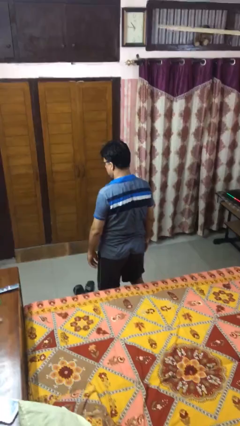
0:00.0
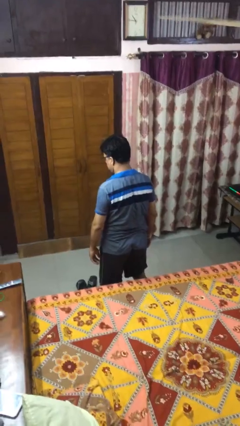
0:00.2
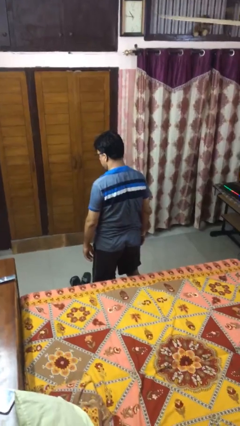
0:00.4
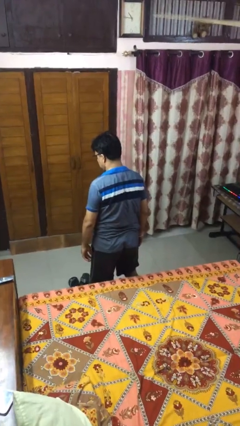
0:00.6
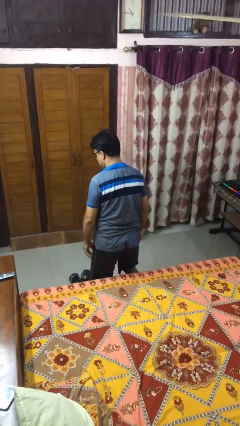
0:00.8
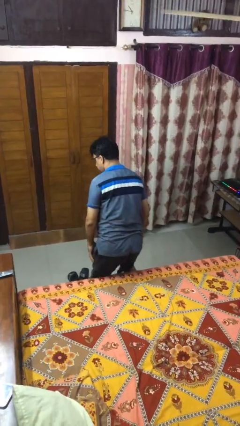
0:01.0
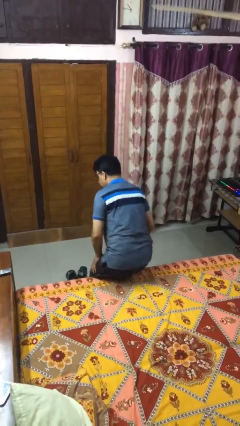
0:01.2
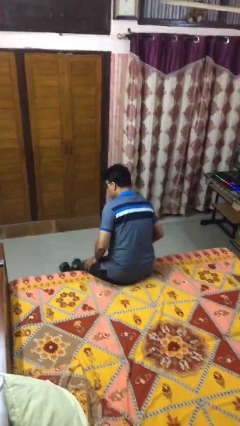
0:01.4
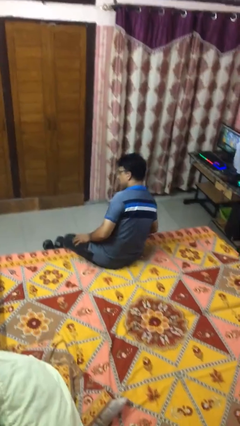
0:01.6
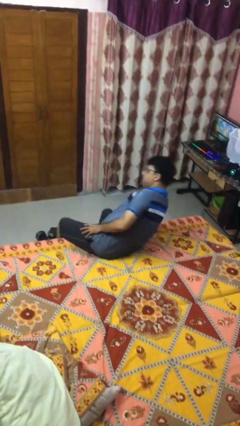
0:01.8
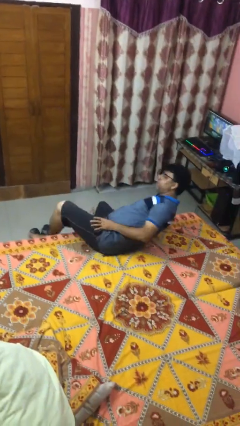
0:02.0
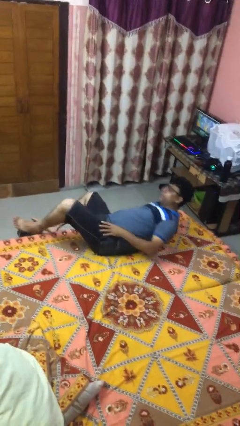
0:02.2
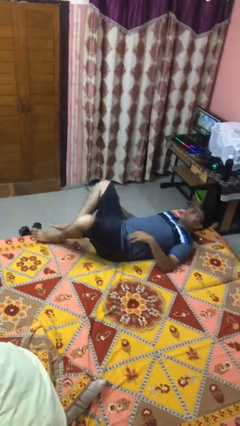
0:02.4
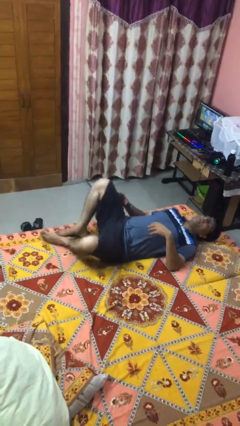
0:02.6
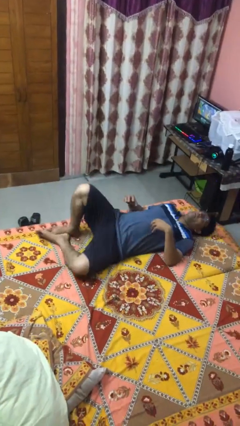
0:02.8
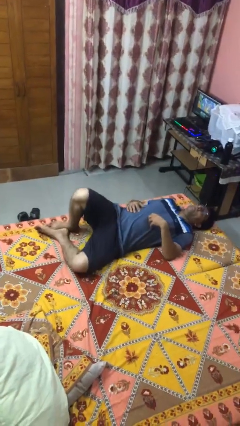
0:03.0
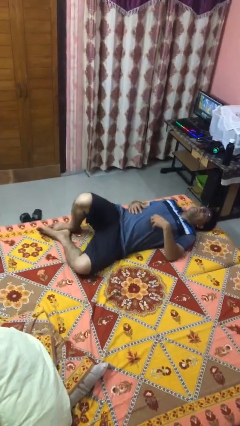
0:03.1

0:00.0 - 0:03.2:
person lies down on bed

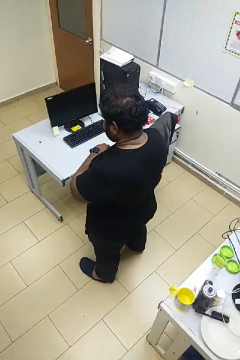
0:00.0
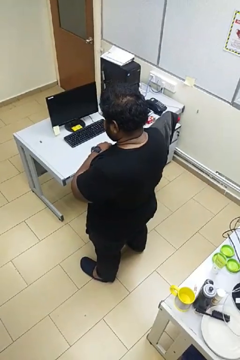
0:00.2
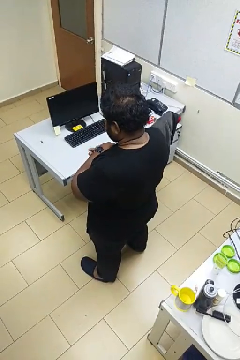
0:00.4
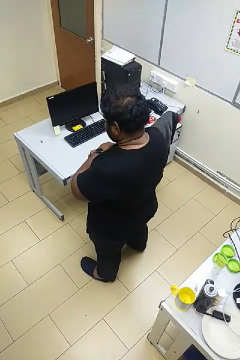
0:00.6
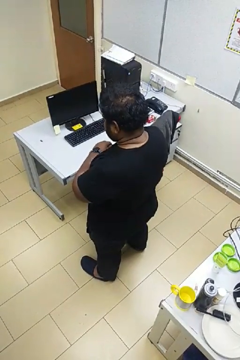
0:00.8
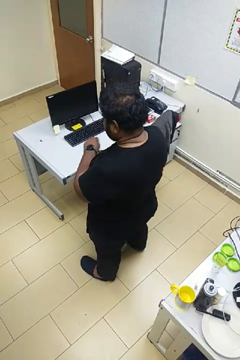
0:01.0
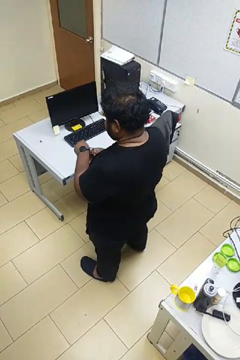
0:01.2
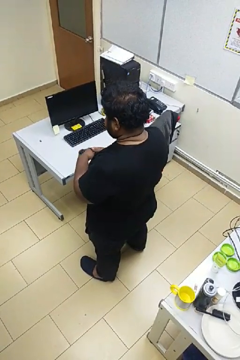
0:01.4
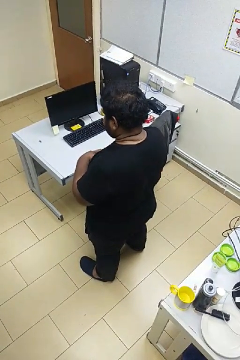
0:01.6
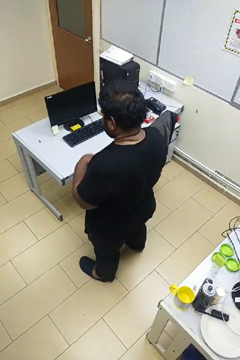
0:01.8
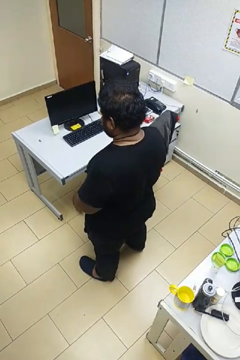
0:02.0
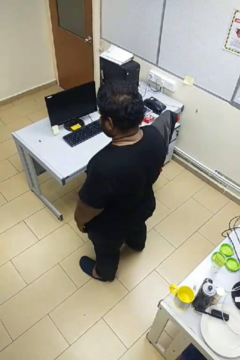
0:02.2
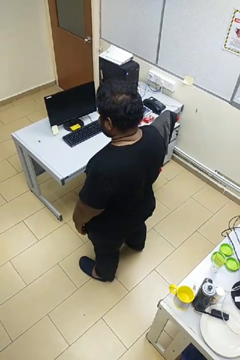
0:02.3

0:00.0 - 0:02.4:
person takes off wristwatch

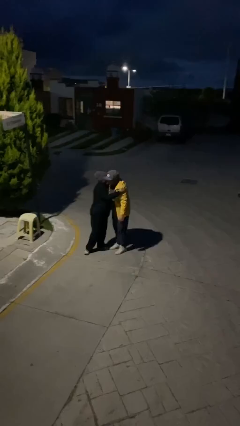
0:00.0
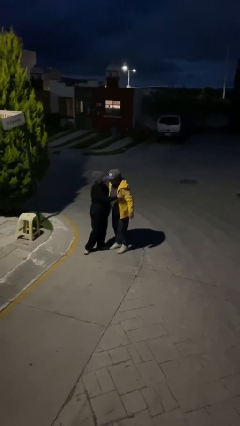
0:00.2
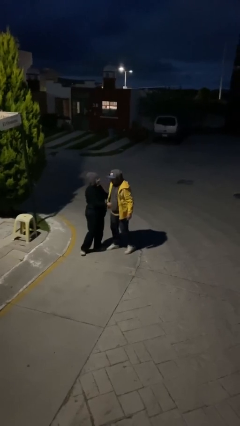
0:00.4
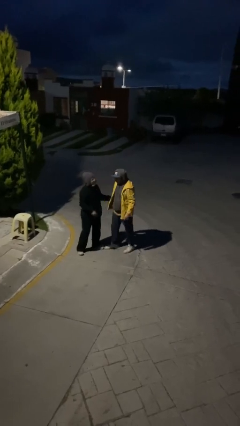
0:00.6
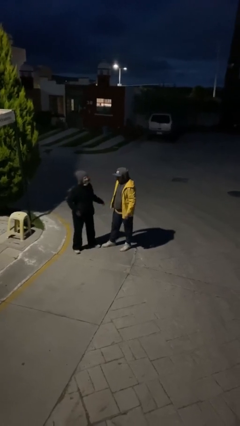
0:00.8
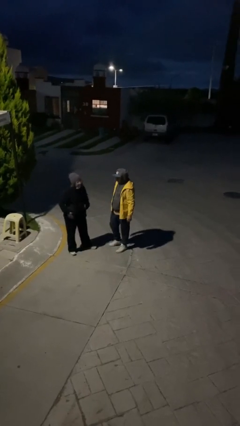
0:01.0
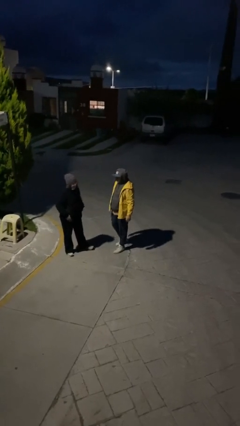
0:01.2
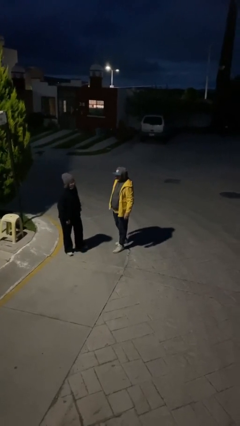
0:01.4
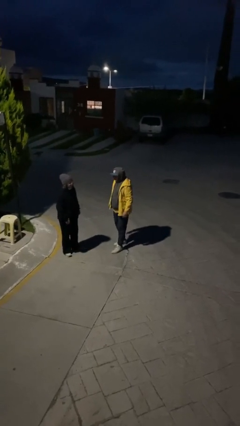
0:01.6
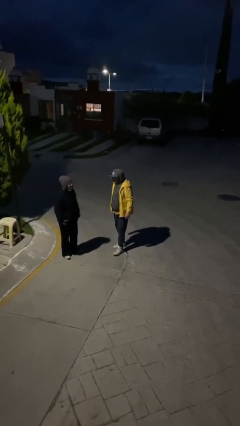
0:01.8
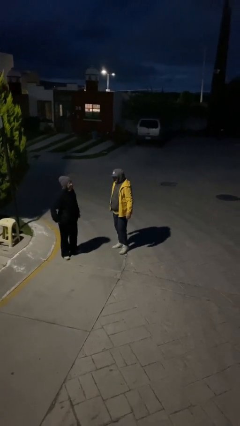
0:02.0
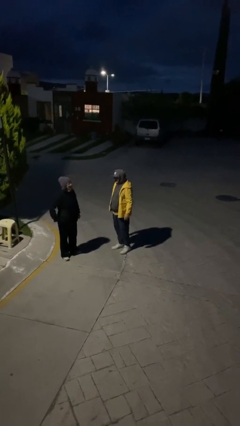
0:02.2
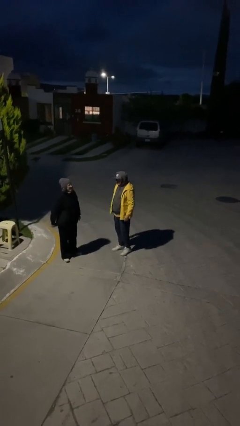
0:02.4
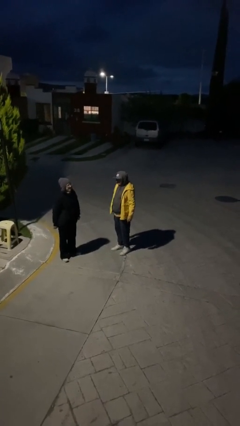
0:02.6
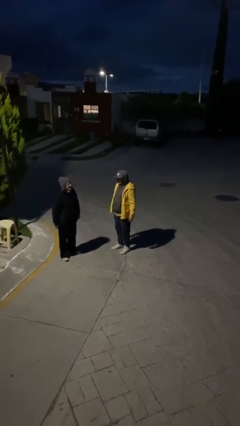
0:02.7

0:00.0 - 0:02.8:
person talks to person

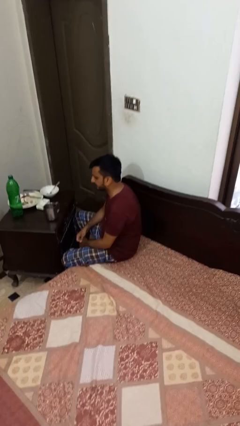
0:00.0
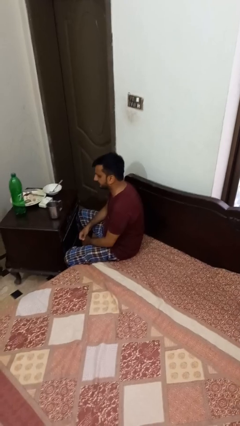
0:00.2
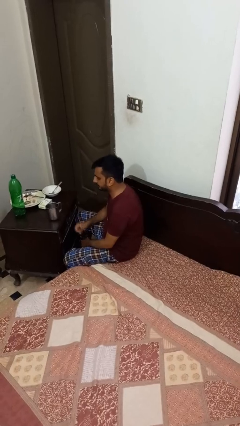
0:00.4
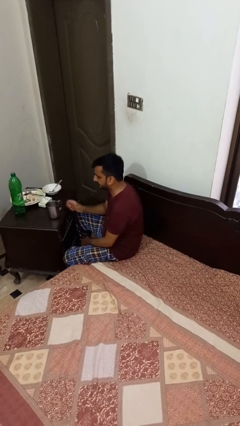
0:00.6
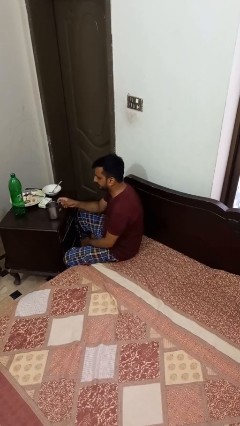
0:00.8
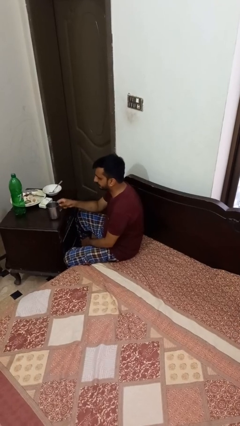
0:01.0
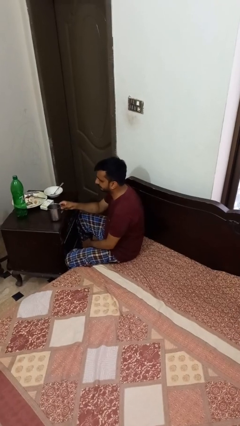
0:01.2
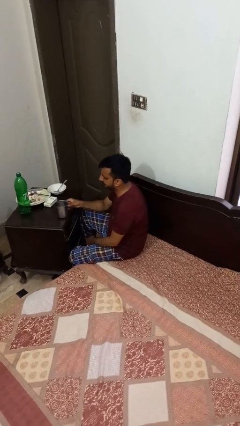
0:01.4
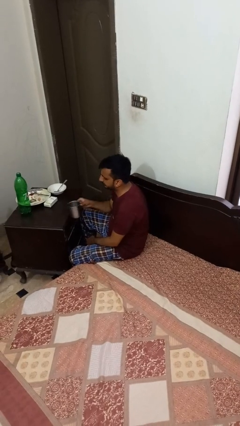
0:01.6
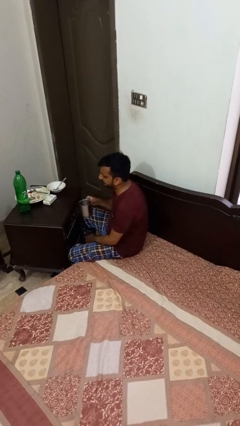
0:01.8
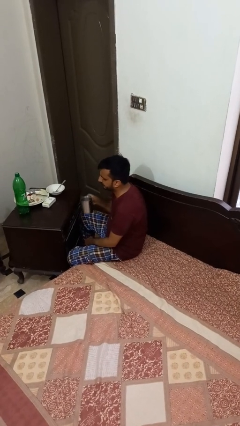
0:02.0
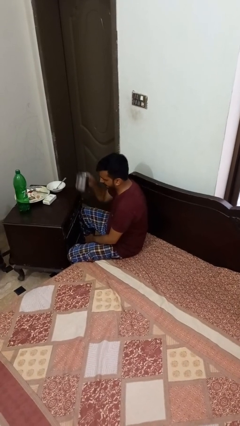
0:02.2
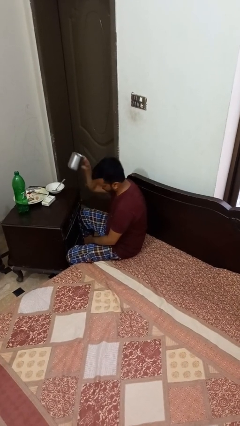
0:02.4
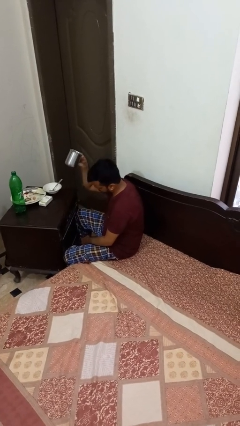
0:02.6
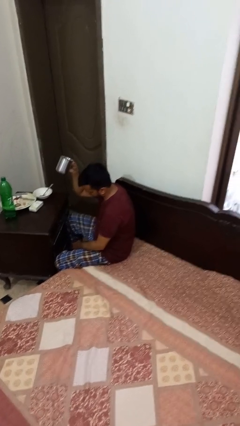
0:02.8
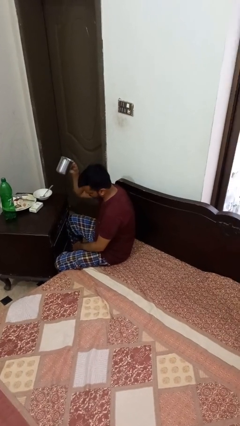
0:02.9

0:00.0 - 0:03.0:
person picks up object from table

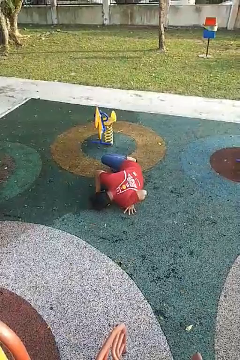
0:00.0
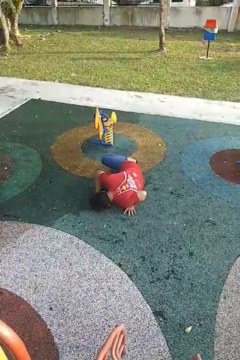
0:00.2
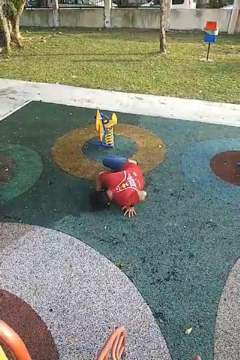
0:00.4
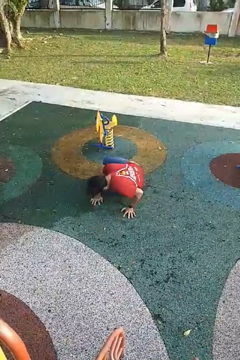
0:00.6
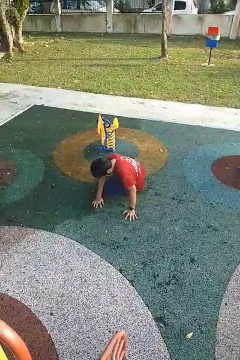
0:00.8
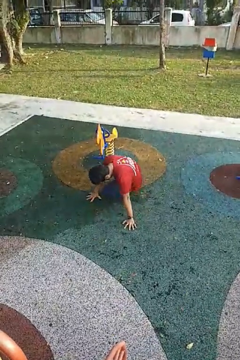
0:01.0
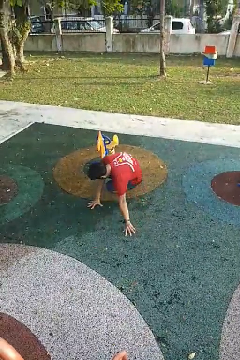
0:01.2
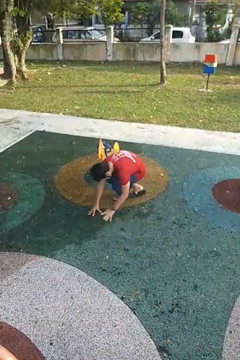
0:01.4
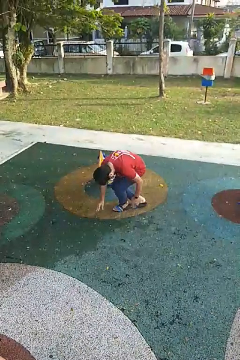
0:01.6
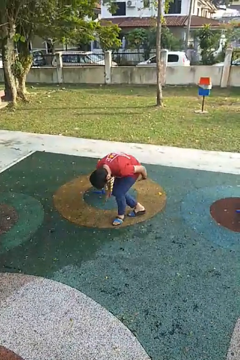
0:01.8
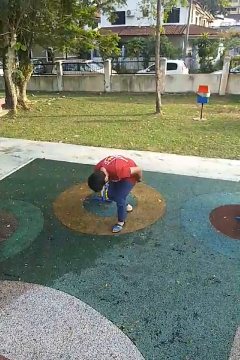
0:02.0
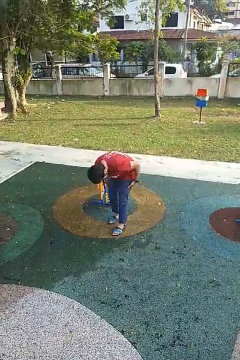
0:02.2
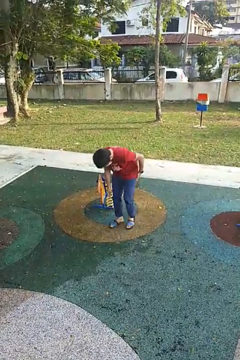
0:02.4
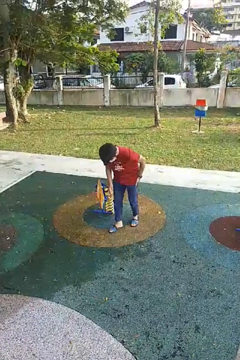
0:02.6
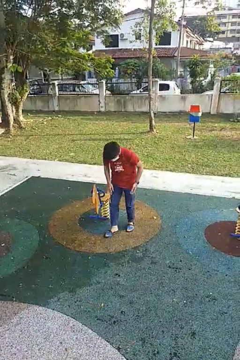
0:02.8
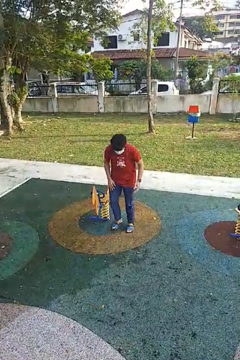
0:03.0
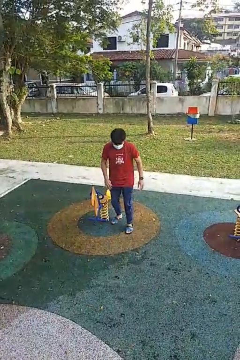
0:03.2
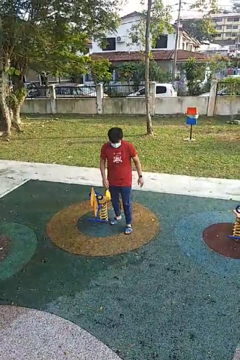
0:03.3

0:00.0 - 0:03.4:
person stands up from floor

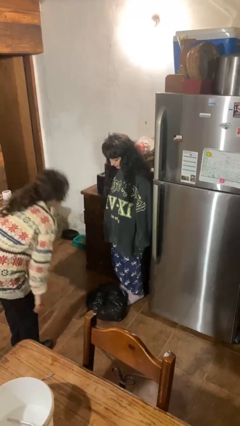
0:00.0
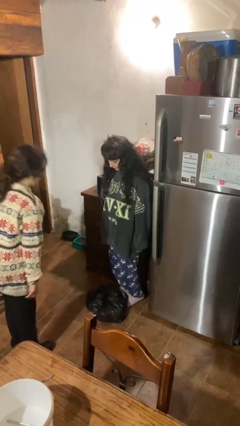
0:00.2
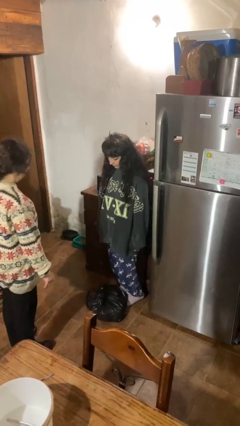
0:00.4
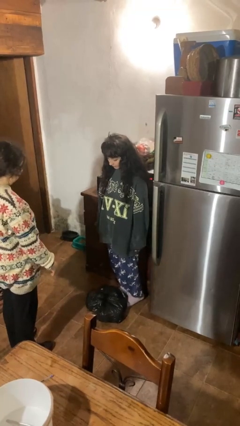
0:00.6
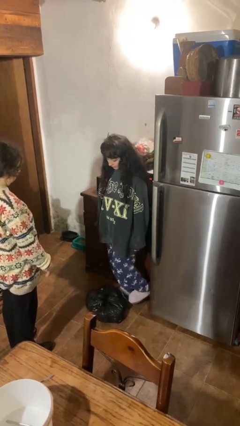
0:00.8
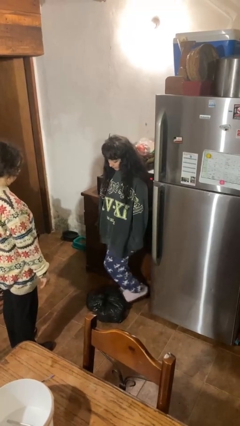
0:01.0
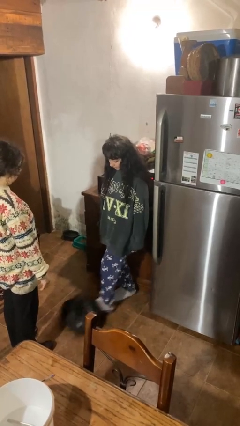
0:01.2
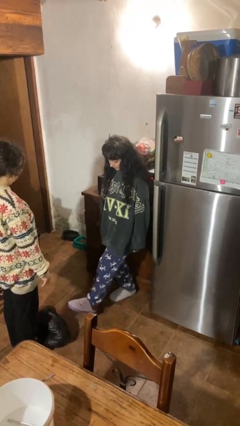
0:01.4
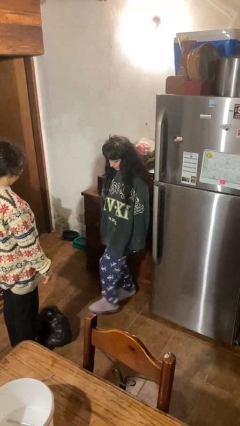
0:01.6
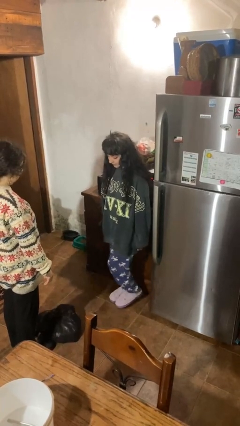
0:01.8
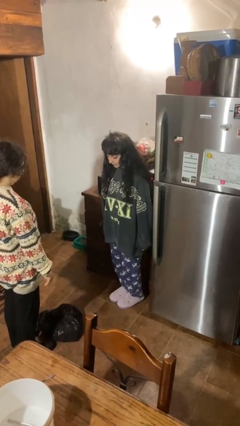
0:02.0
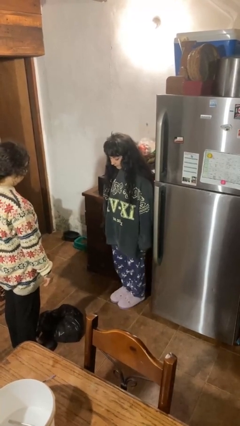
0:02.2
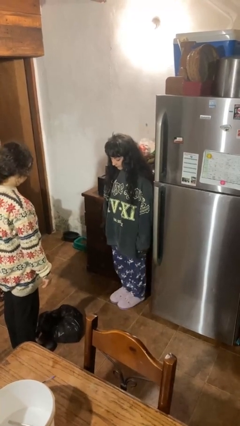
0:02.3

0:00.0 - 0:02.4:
person kicks object to person

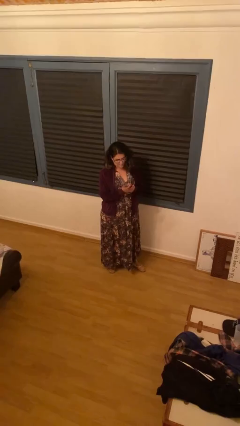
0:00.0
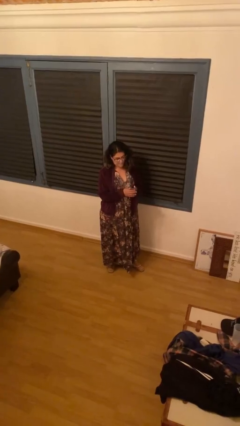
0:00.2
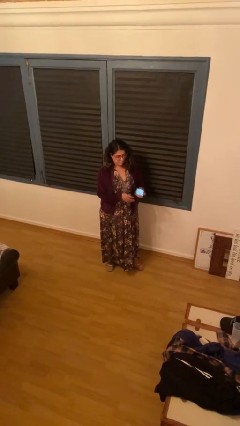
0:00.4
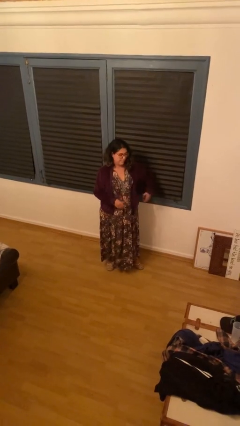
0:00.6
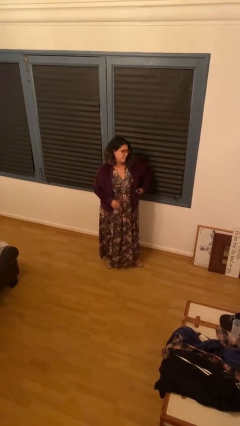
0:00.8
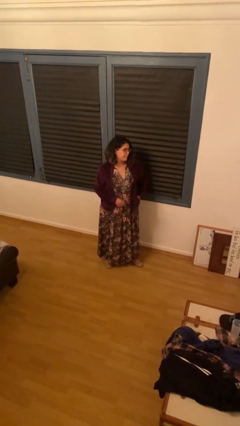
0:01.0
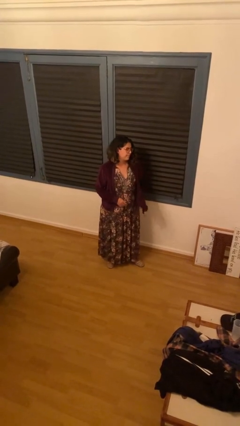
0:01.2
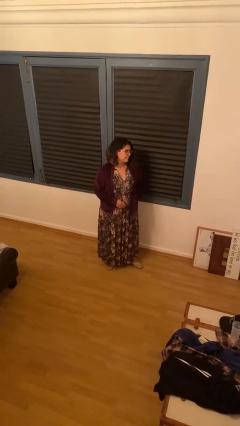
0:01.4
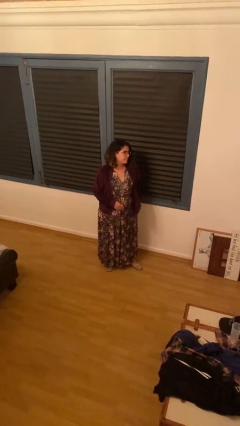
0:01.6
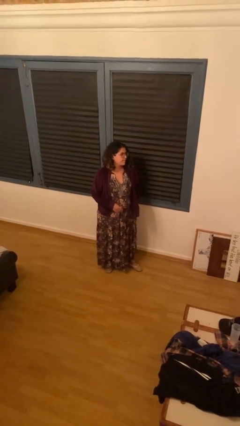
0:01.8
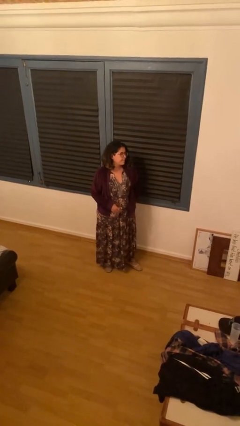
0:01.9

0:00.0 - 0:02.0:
person puts phone into pocket
